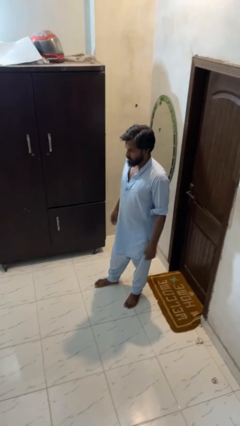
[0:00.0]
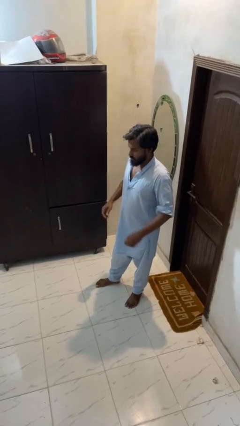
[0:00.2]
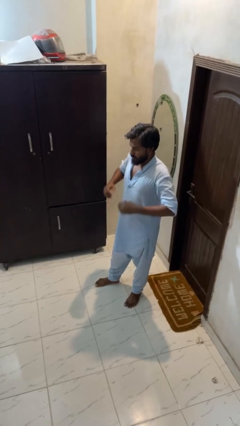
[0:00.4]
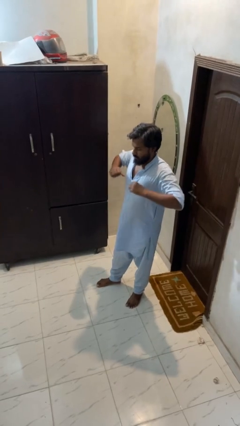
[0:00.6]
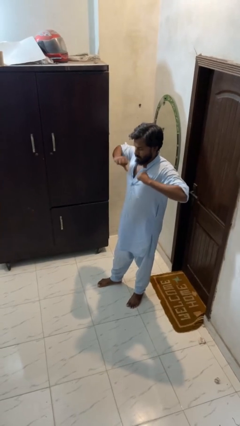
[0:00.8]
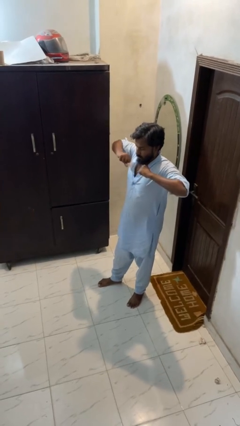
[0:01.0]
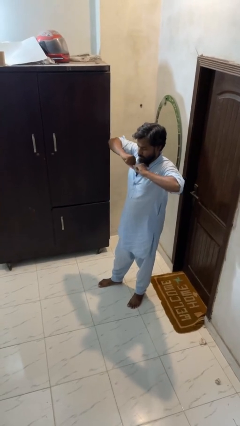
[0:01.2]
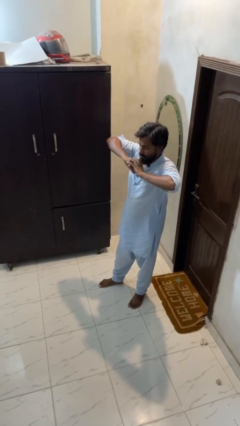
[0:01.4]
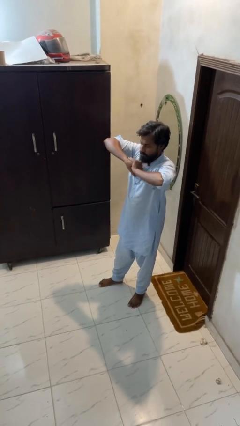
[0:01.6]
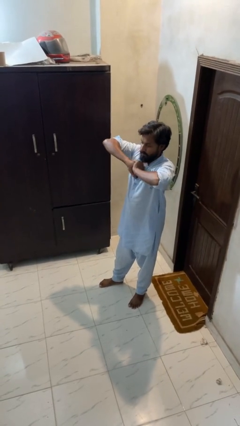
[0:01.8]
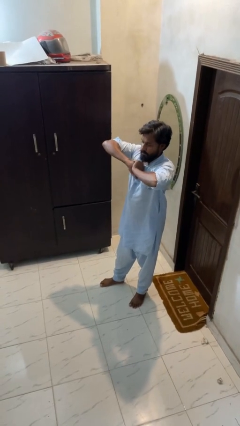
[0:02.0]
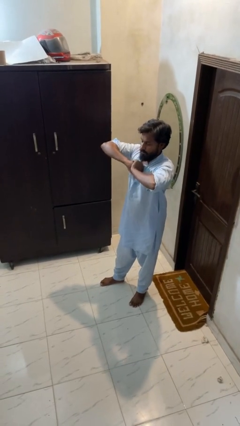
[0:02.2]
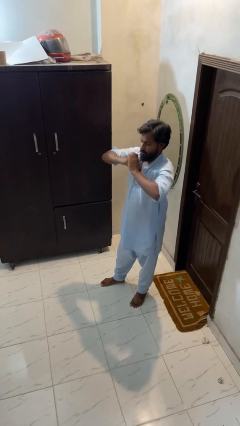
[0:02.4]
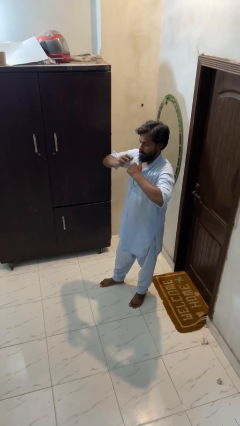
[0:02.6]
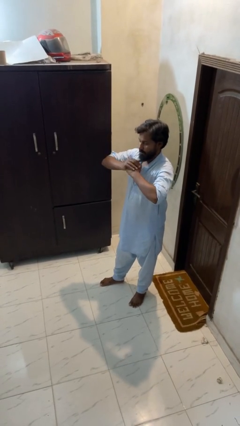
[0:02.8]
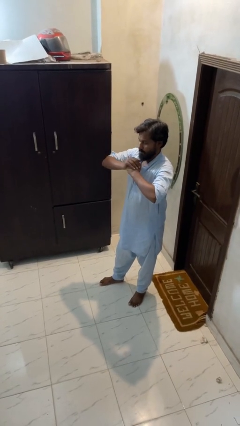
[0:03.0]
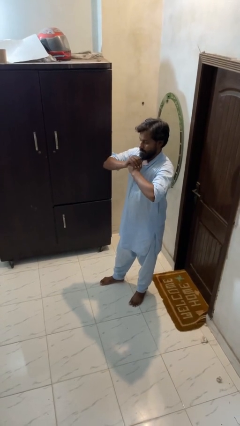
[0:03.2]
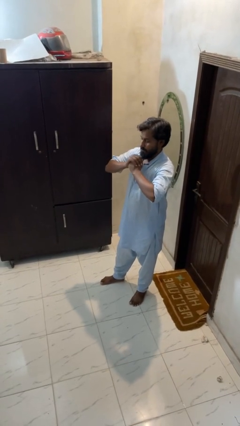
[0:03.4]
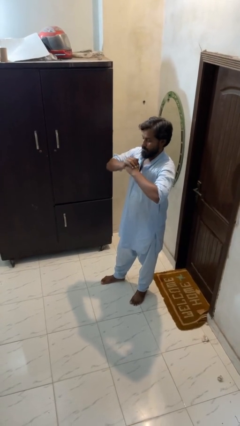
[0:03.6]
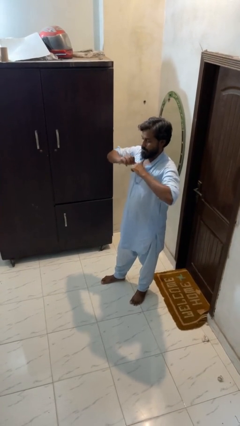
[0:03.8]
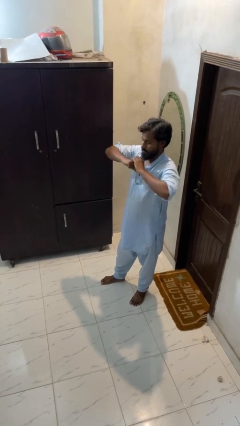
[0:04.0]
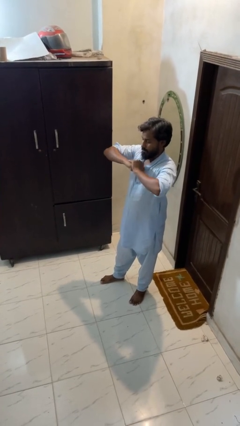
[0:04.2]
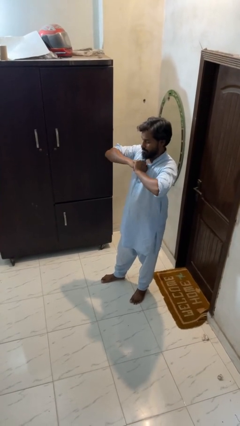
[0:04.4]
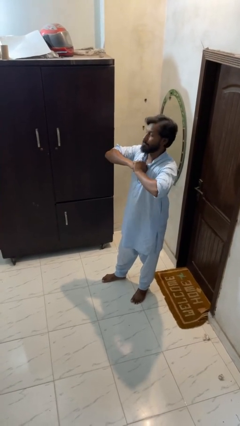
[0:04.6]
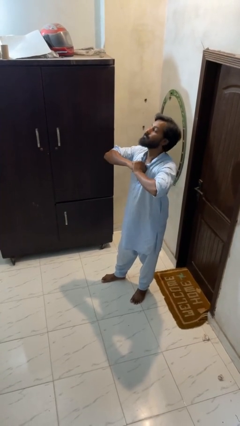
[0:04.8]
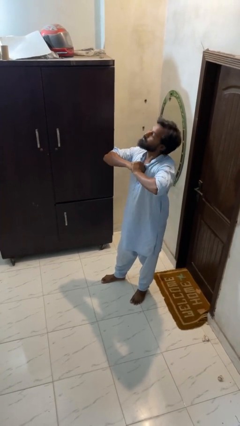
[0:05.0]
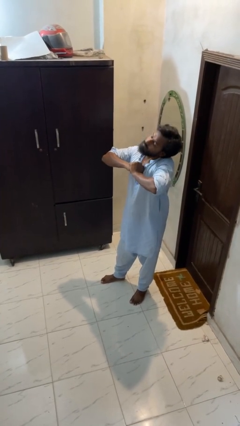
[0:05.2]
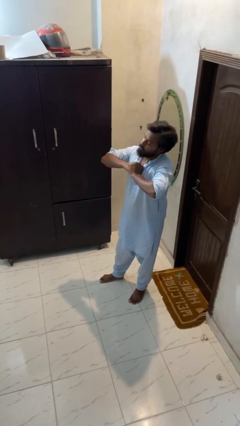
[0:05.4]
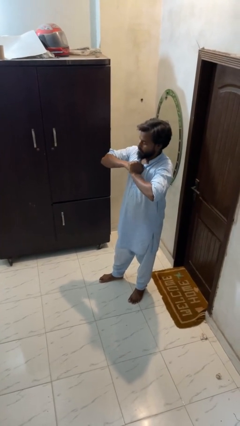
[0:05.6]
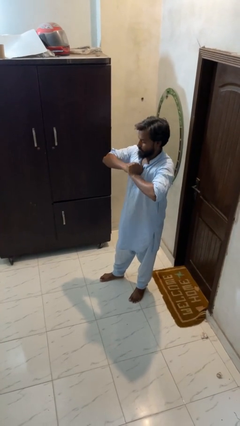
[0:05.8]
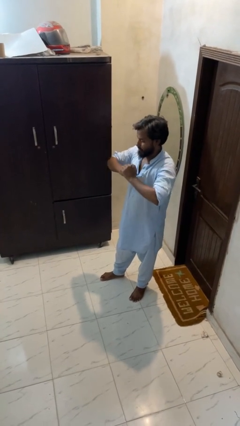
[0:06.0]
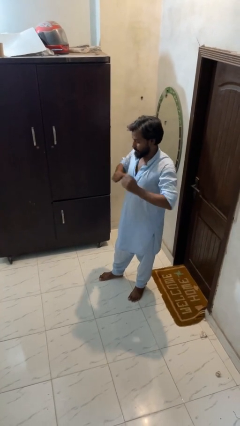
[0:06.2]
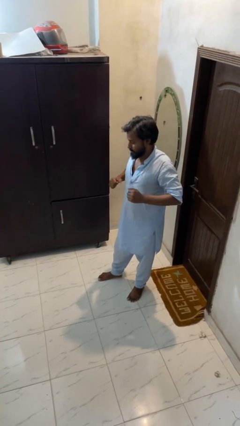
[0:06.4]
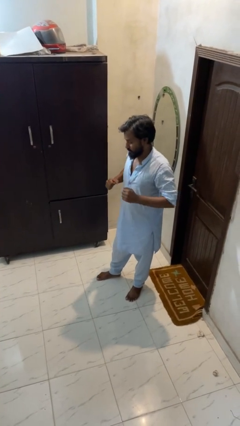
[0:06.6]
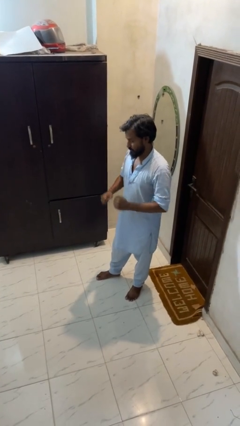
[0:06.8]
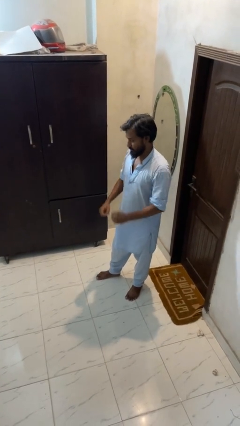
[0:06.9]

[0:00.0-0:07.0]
person cracks knuckles

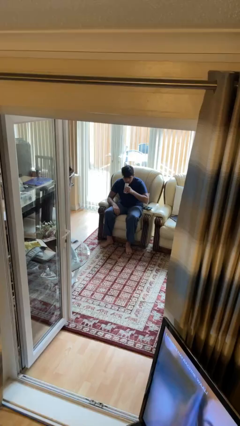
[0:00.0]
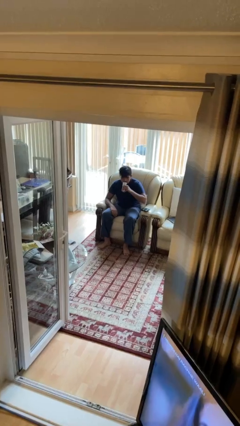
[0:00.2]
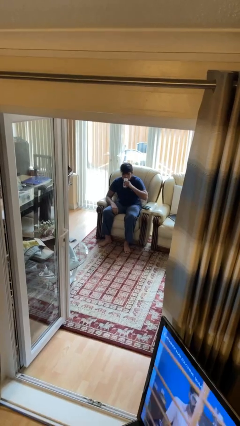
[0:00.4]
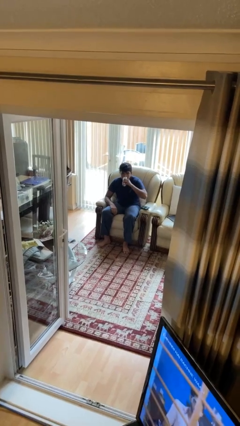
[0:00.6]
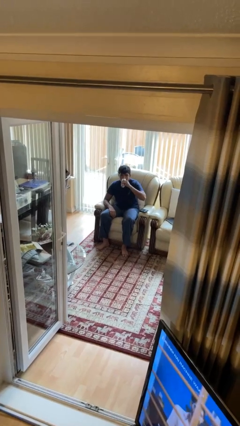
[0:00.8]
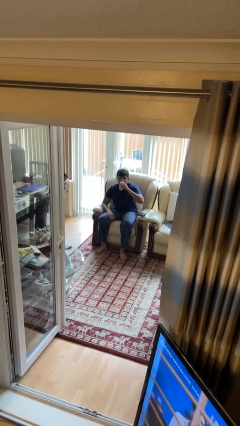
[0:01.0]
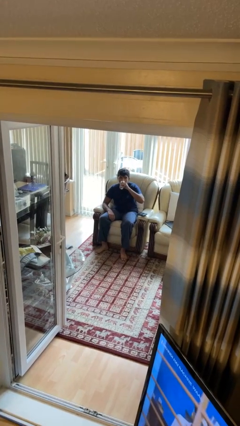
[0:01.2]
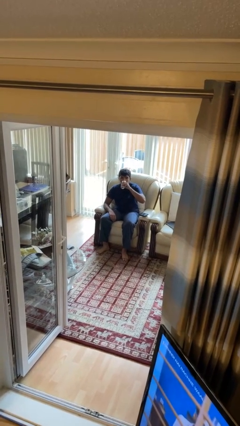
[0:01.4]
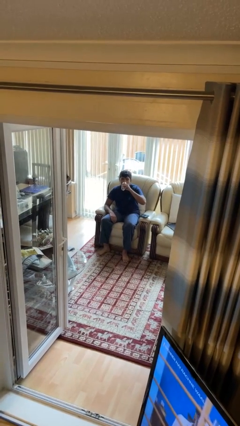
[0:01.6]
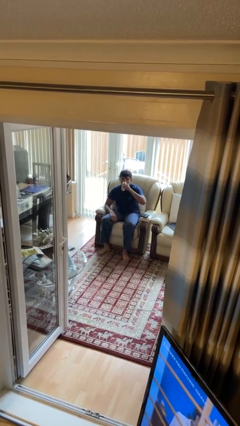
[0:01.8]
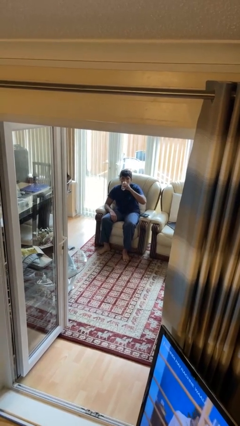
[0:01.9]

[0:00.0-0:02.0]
person drinks from beverage can

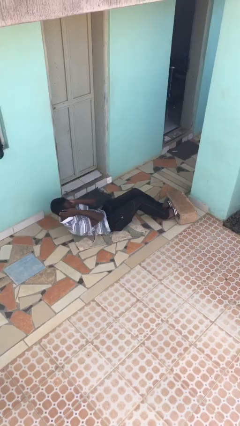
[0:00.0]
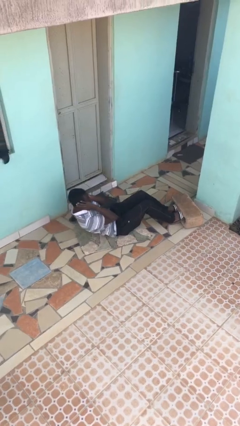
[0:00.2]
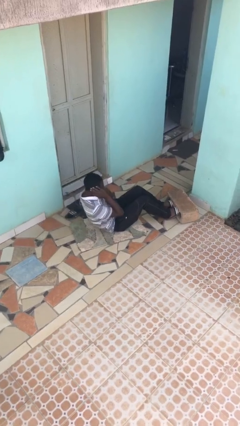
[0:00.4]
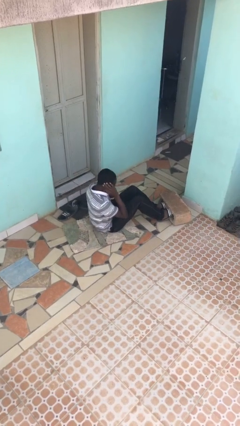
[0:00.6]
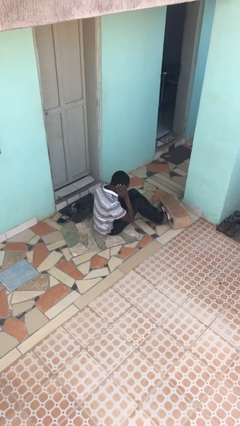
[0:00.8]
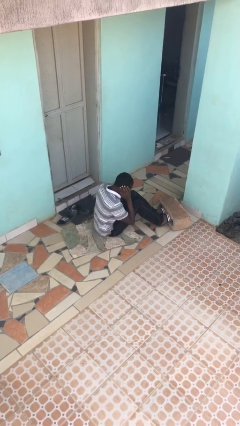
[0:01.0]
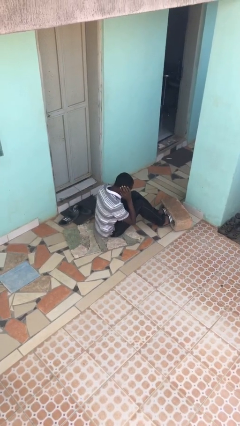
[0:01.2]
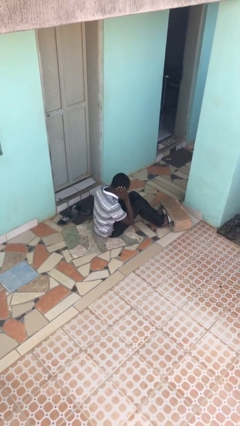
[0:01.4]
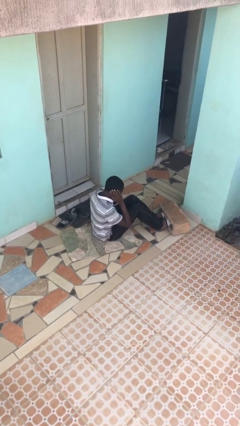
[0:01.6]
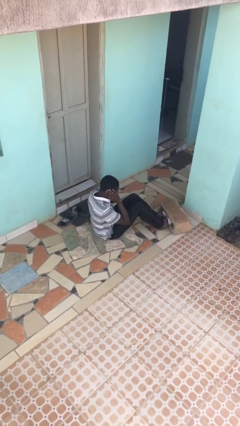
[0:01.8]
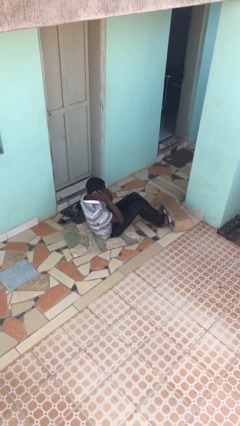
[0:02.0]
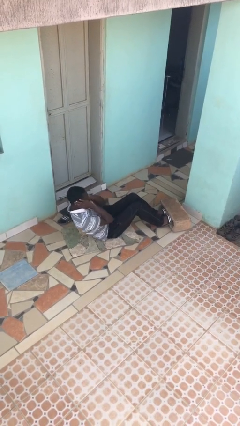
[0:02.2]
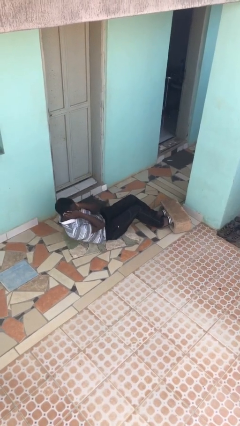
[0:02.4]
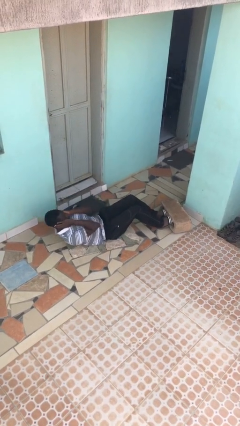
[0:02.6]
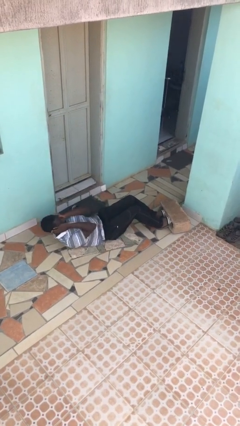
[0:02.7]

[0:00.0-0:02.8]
person exercises with situp

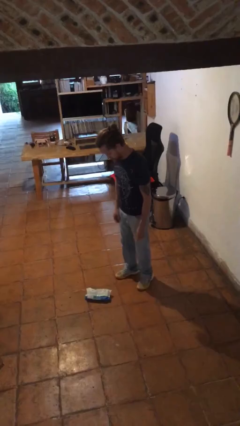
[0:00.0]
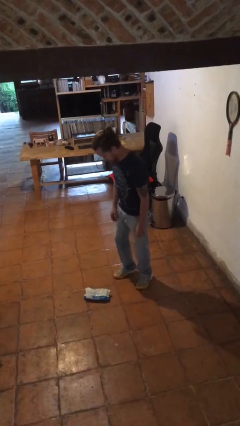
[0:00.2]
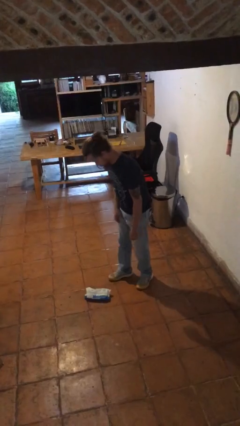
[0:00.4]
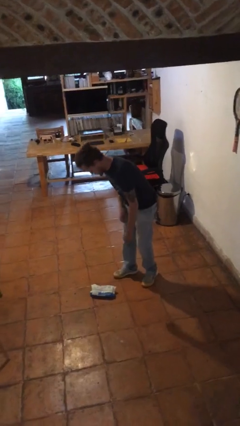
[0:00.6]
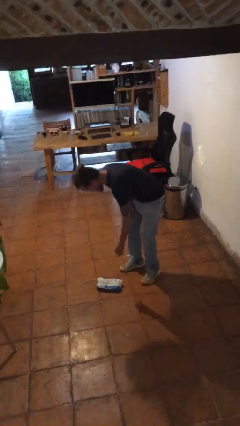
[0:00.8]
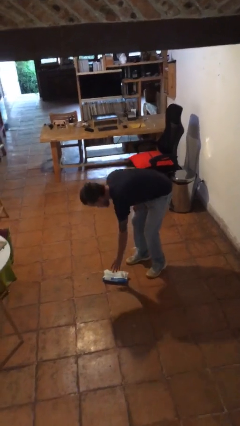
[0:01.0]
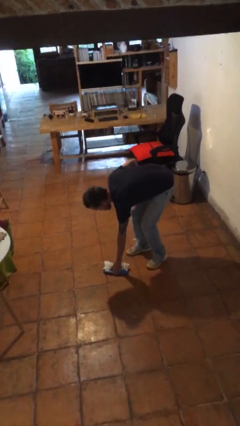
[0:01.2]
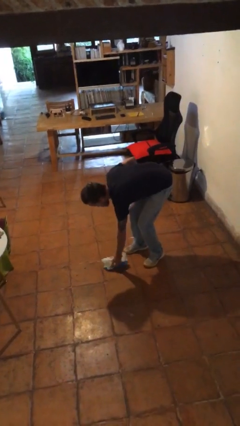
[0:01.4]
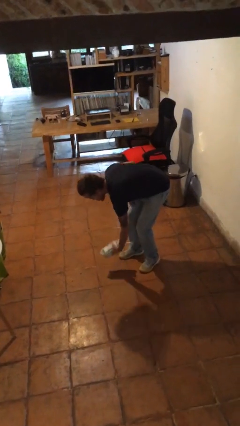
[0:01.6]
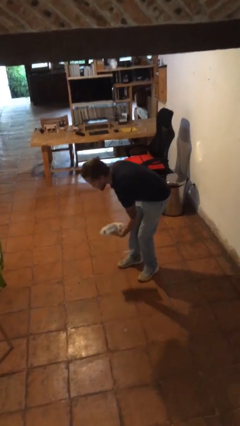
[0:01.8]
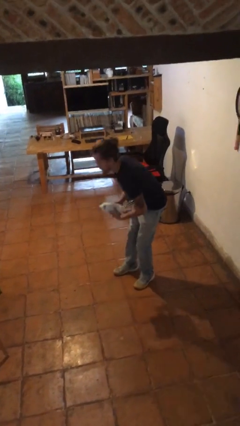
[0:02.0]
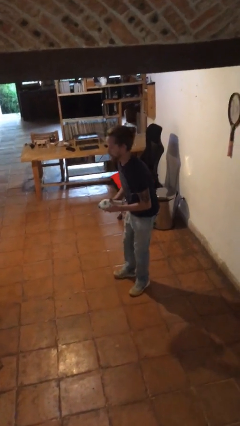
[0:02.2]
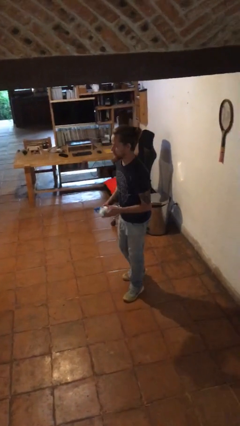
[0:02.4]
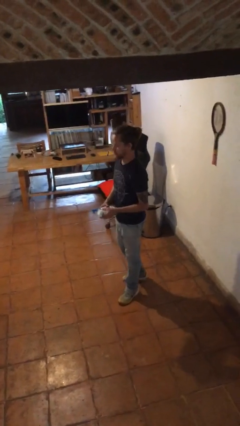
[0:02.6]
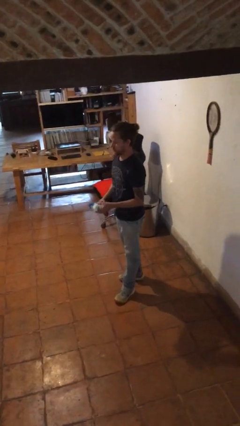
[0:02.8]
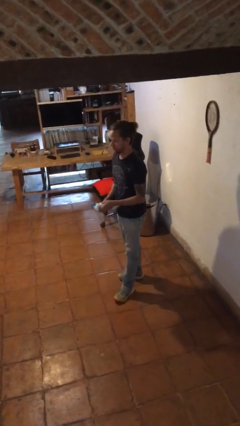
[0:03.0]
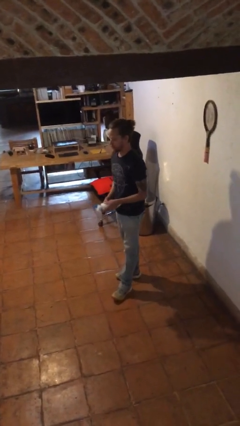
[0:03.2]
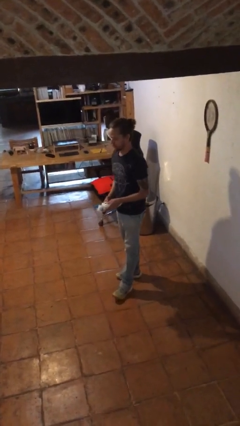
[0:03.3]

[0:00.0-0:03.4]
person picks up object from floor

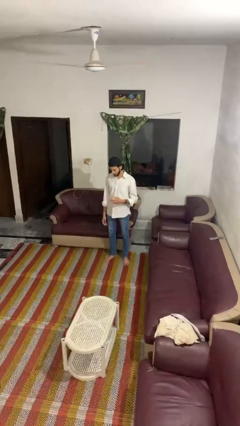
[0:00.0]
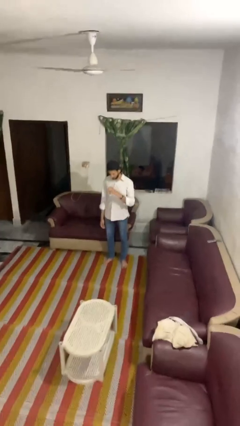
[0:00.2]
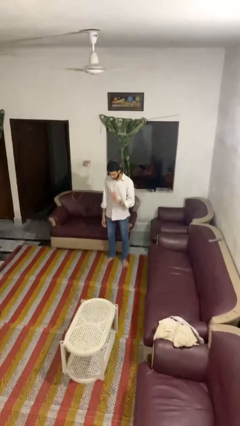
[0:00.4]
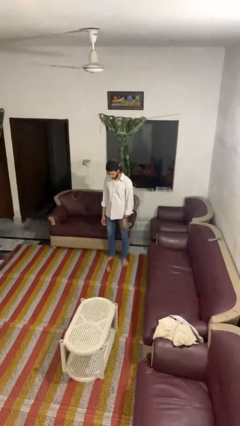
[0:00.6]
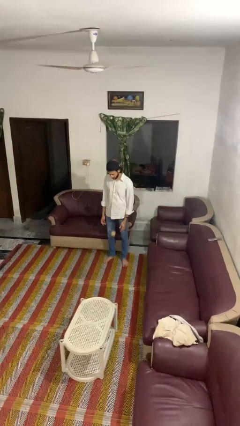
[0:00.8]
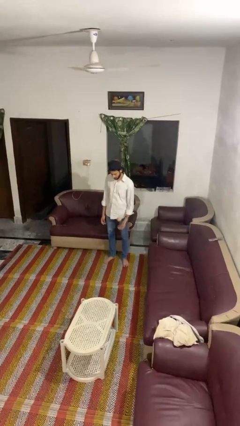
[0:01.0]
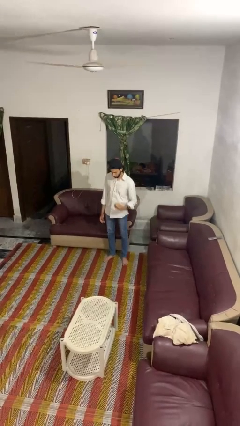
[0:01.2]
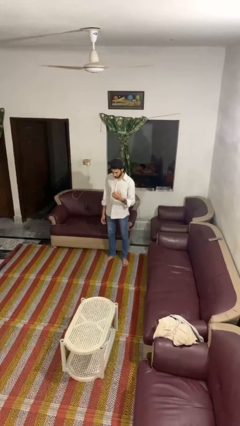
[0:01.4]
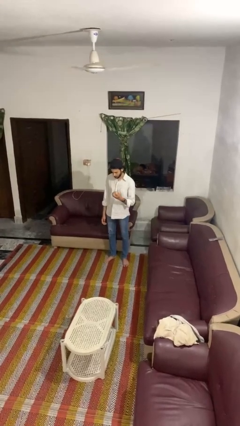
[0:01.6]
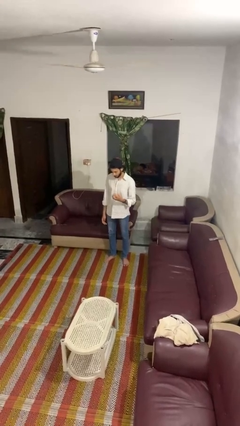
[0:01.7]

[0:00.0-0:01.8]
person bounces ball on floor

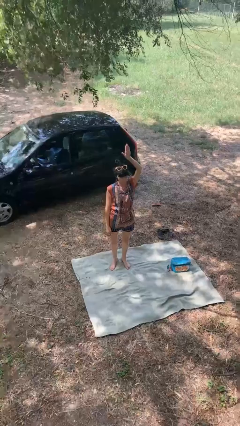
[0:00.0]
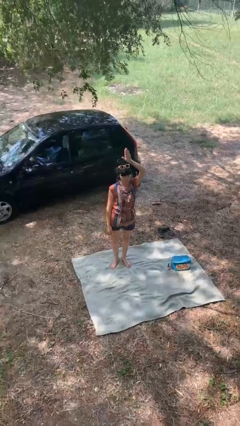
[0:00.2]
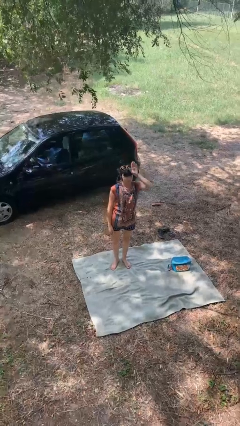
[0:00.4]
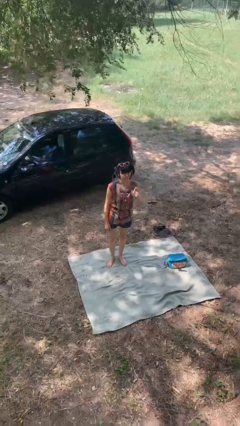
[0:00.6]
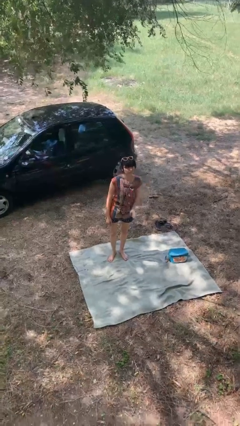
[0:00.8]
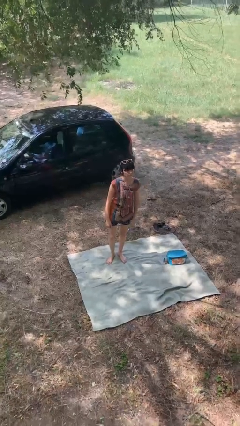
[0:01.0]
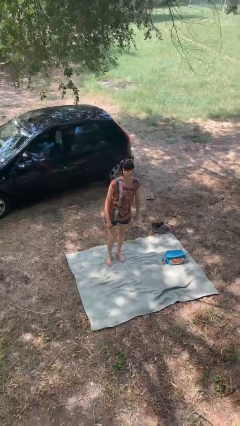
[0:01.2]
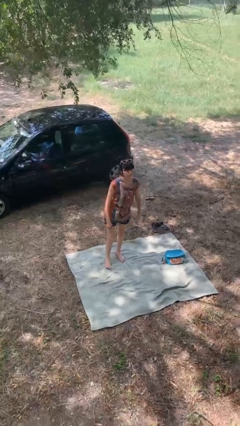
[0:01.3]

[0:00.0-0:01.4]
person gestures lower hand
